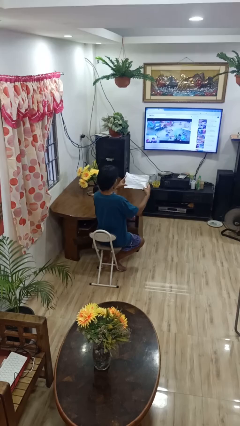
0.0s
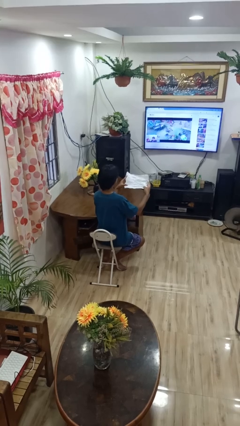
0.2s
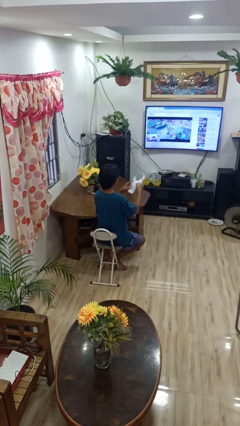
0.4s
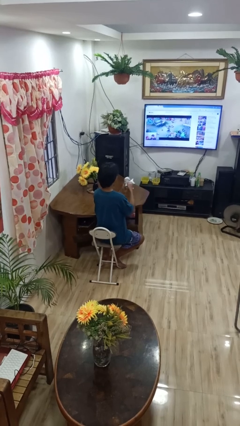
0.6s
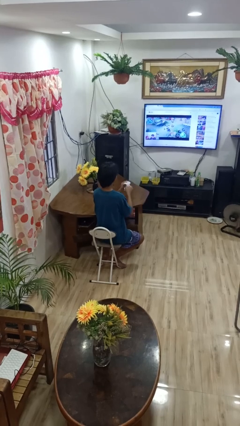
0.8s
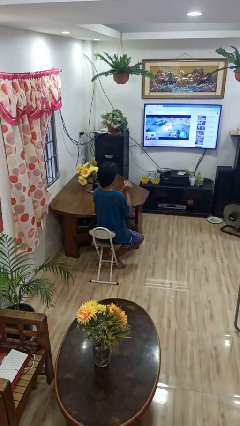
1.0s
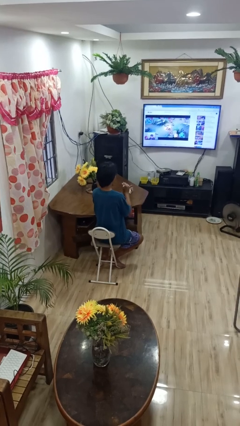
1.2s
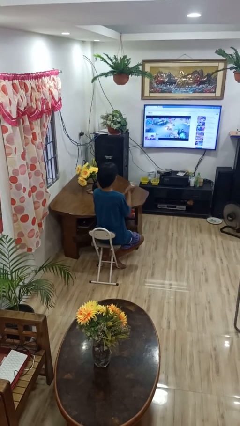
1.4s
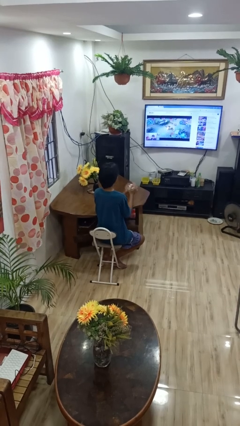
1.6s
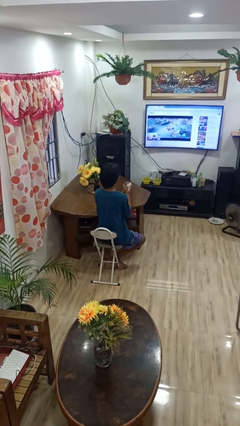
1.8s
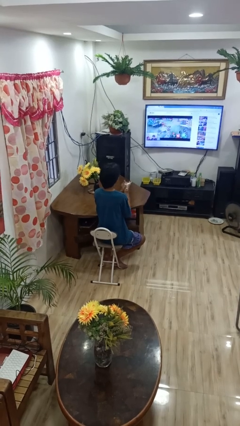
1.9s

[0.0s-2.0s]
person crumples paper

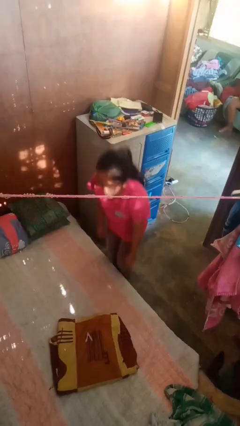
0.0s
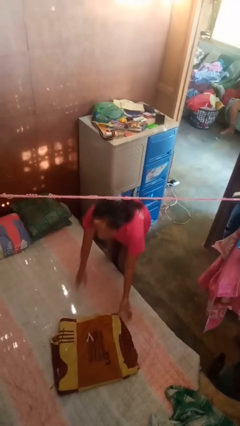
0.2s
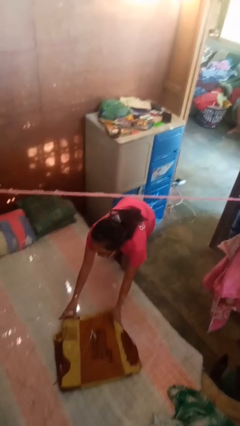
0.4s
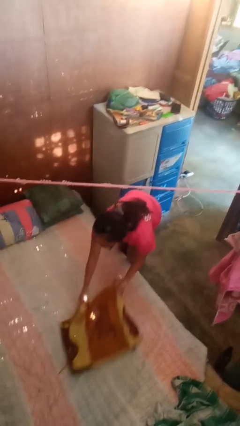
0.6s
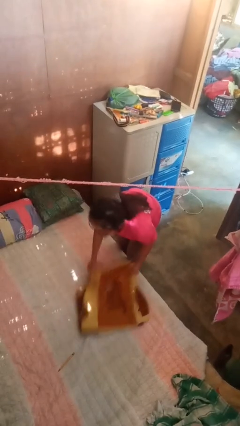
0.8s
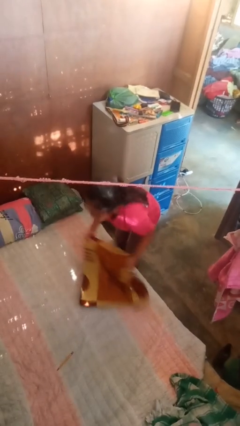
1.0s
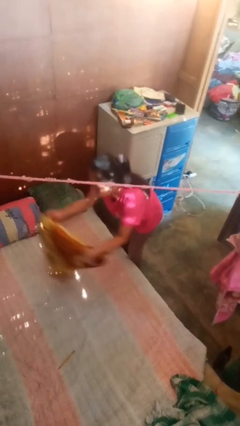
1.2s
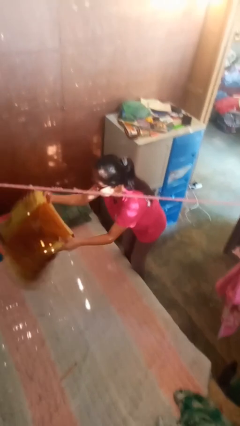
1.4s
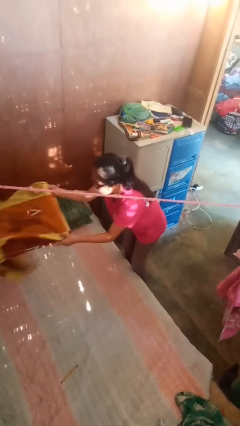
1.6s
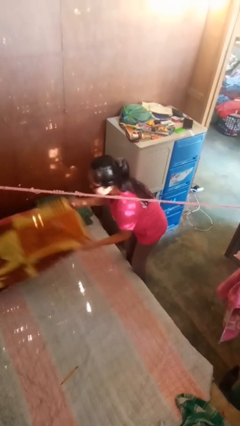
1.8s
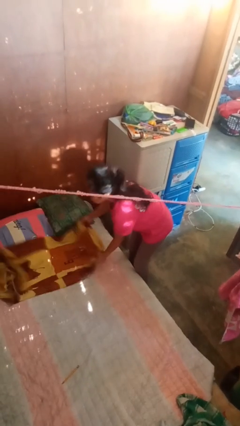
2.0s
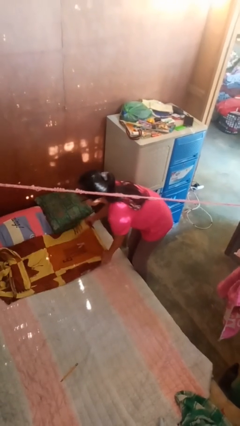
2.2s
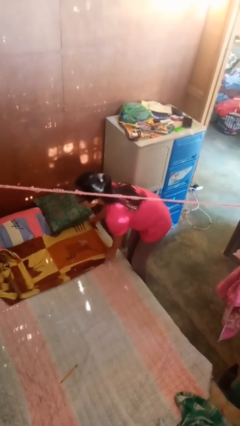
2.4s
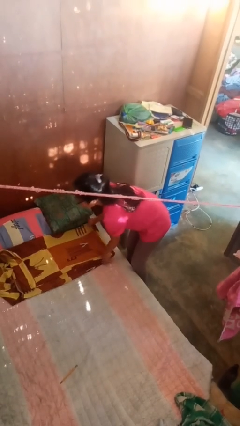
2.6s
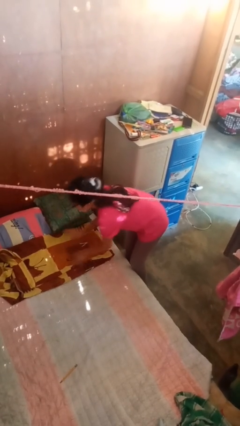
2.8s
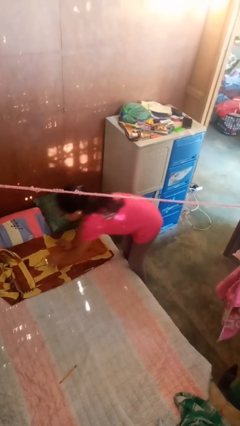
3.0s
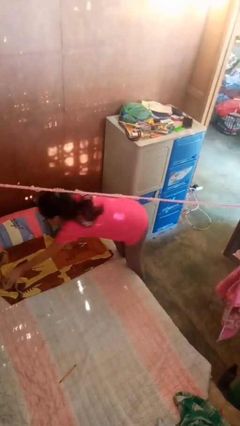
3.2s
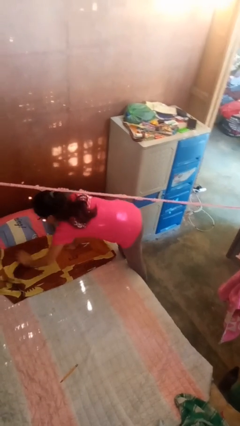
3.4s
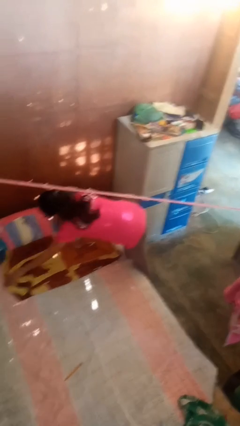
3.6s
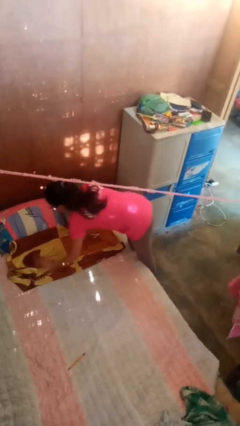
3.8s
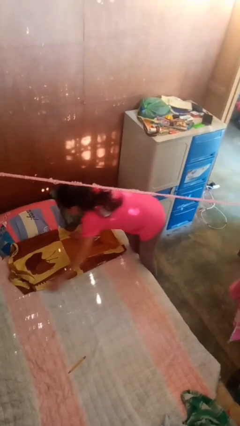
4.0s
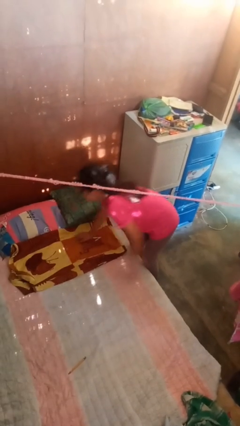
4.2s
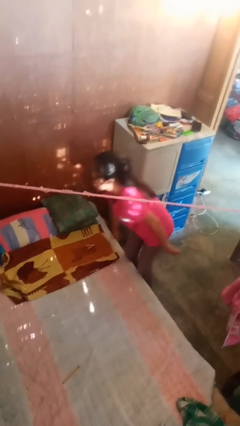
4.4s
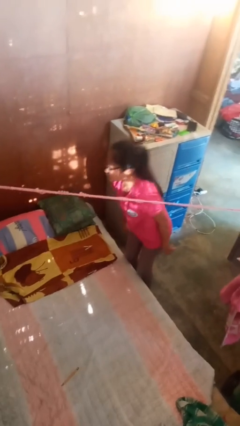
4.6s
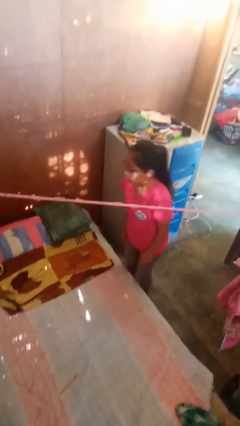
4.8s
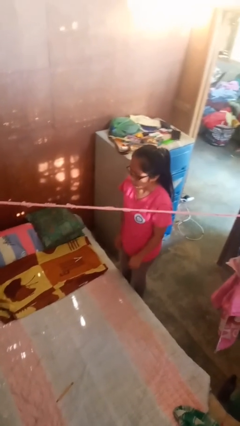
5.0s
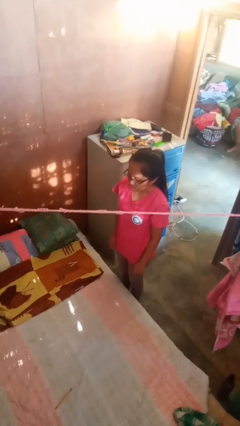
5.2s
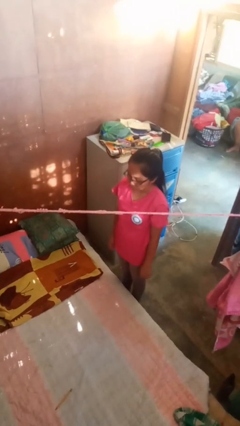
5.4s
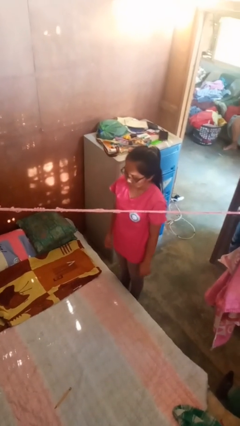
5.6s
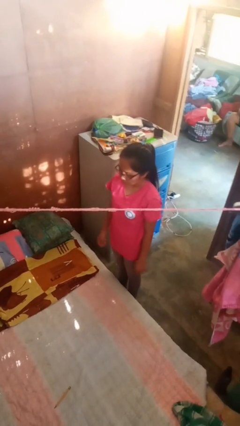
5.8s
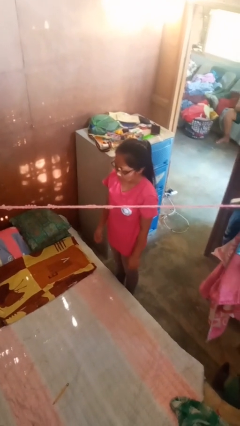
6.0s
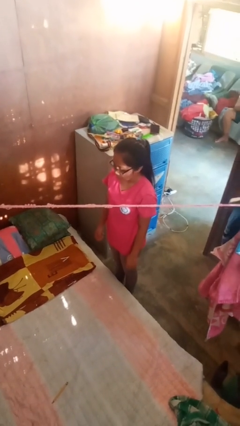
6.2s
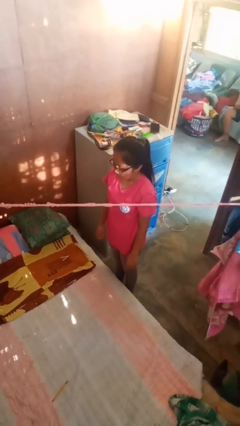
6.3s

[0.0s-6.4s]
person makes bed

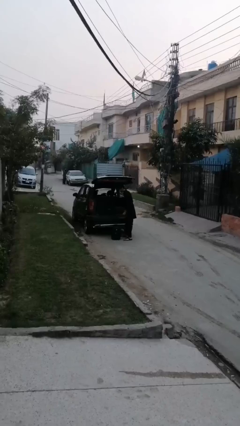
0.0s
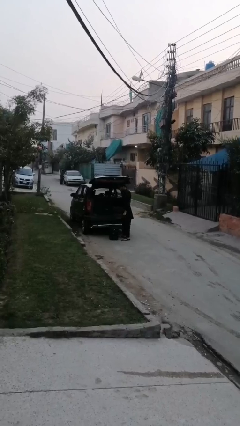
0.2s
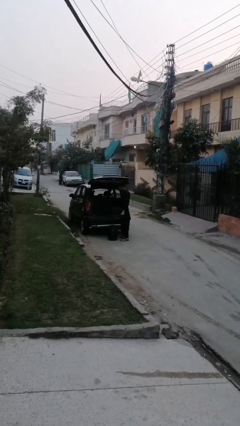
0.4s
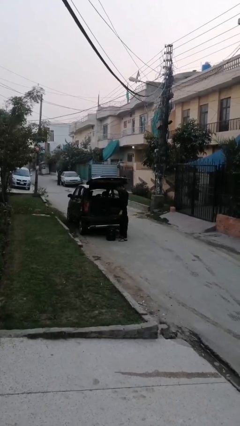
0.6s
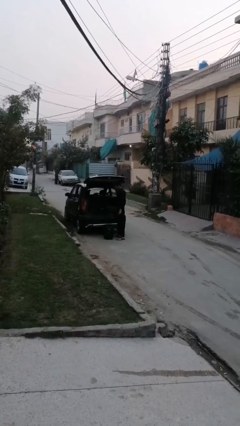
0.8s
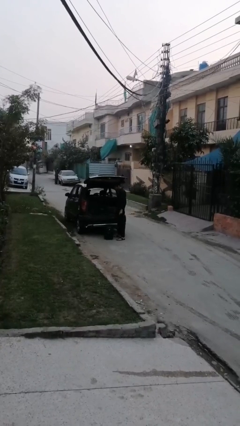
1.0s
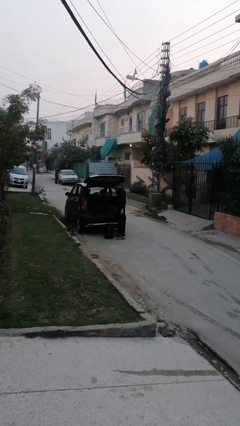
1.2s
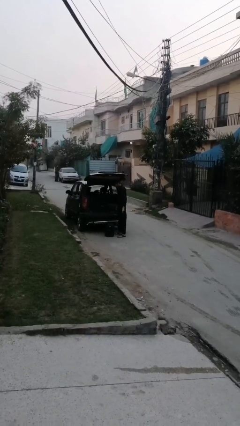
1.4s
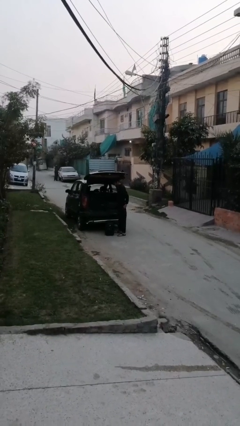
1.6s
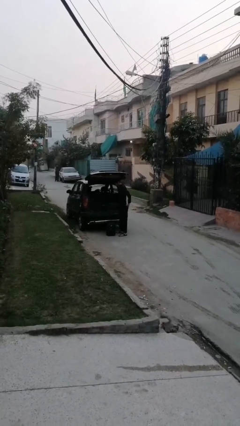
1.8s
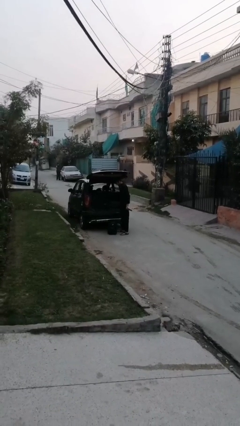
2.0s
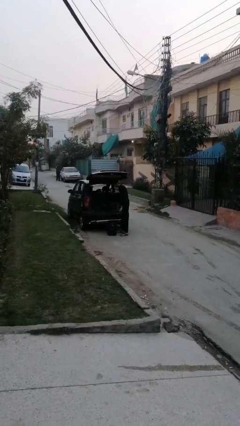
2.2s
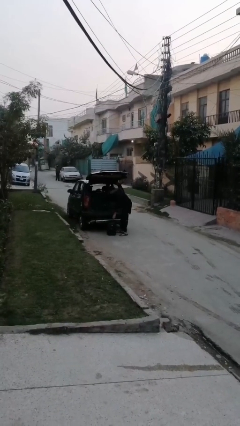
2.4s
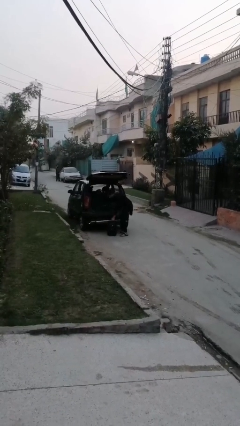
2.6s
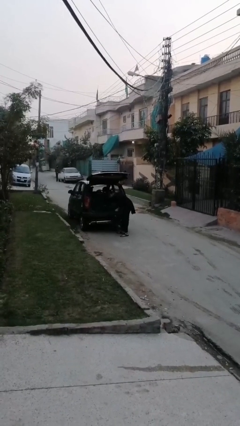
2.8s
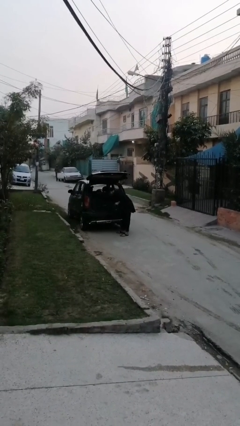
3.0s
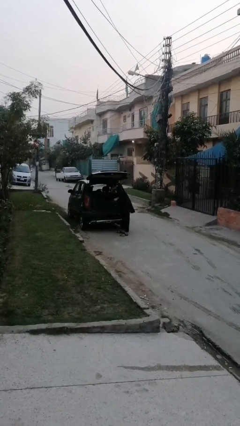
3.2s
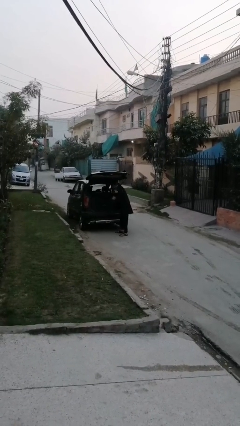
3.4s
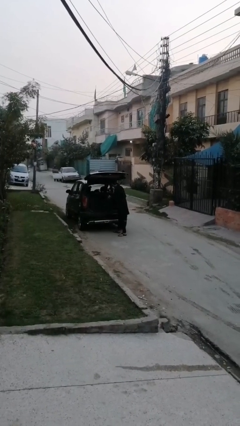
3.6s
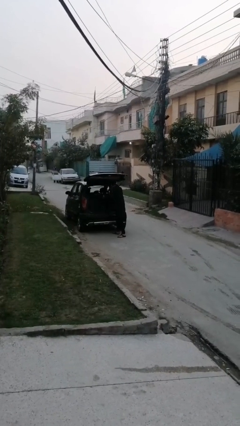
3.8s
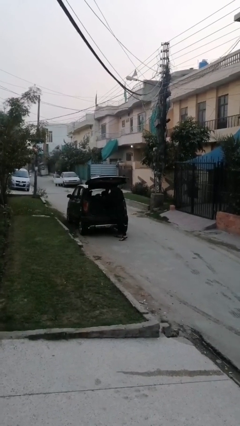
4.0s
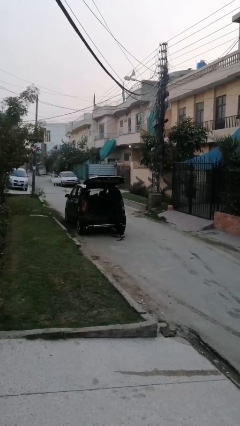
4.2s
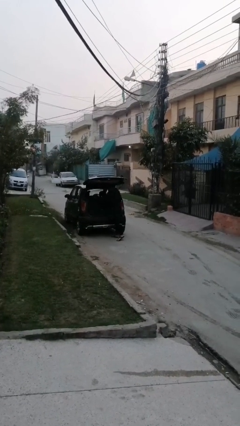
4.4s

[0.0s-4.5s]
person unloads car

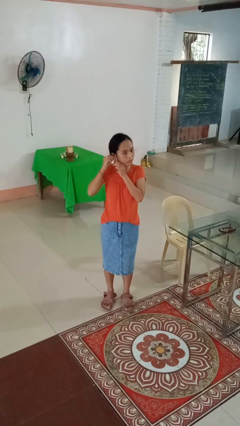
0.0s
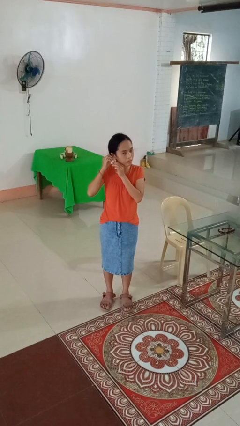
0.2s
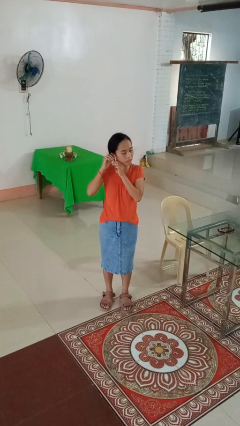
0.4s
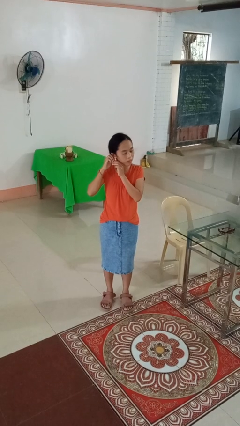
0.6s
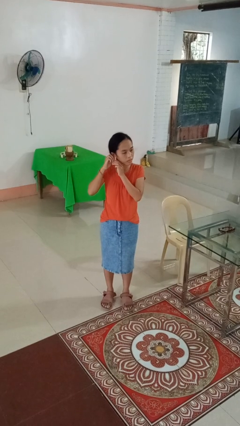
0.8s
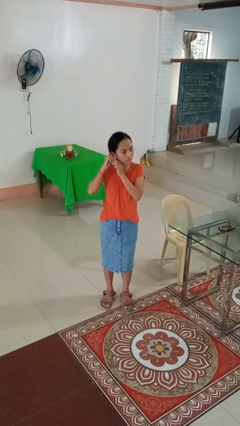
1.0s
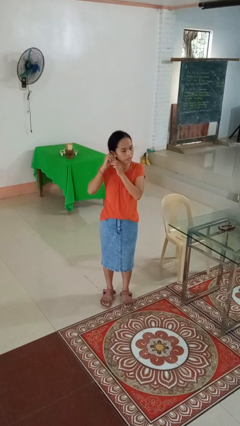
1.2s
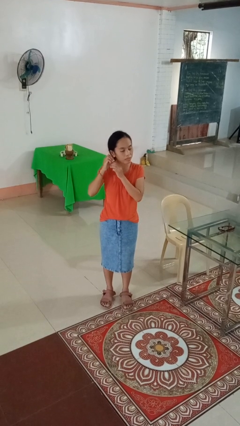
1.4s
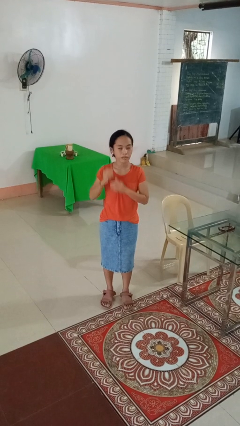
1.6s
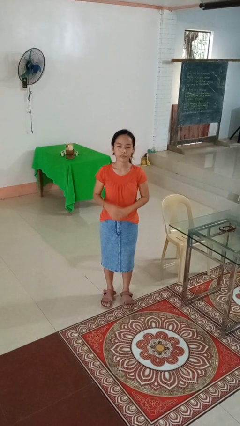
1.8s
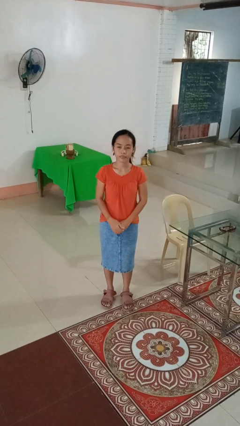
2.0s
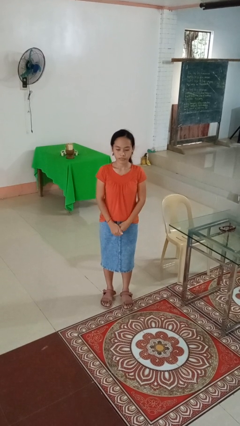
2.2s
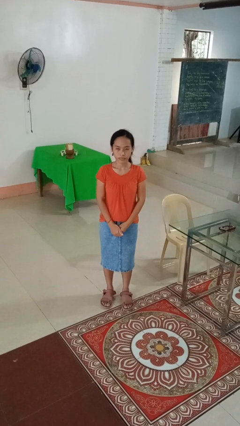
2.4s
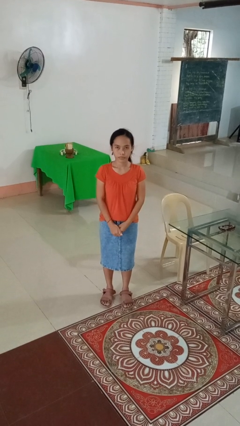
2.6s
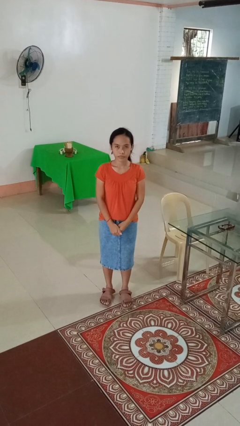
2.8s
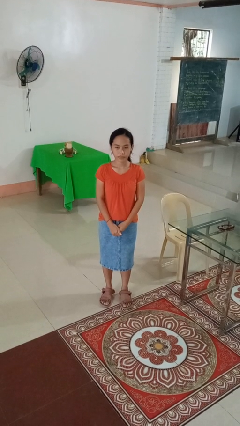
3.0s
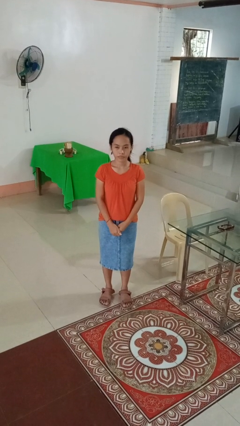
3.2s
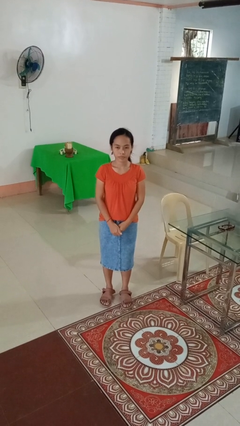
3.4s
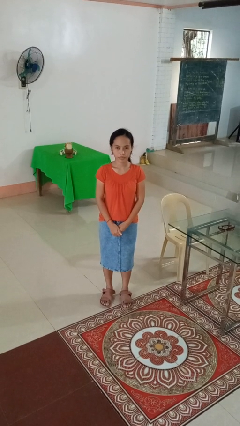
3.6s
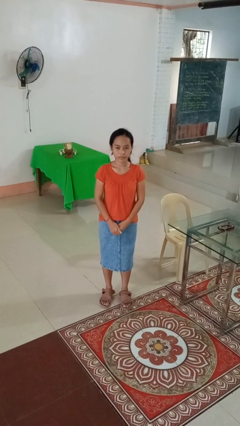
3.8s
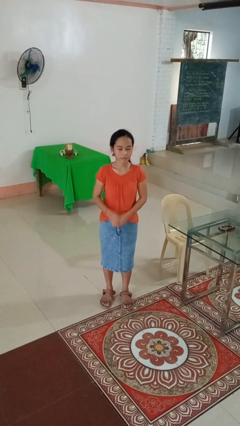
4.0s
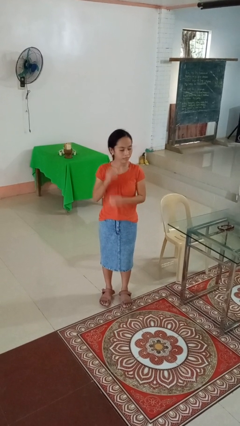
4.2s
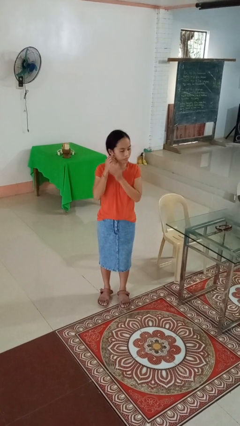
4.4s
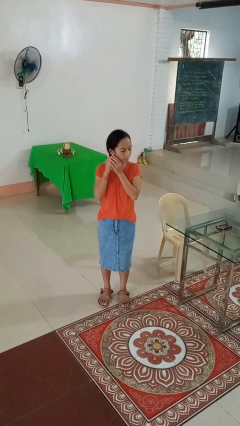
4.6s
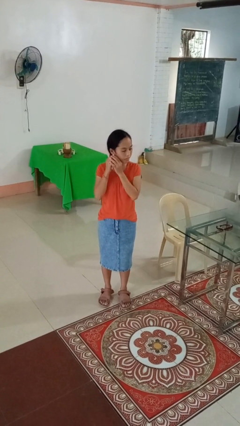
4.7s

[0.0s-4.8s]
person puts on earrings

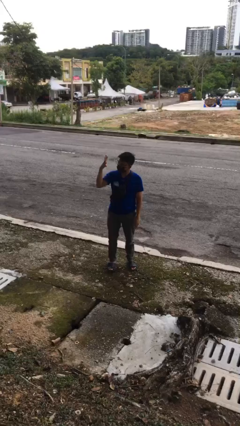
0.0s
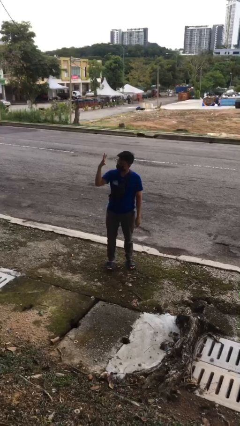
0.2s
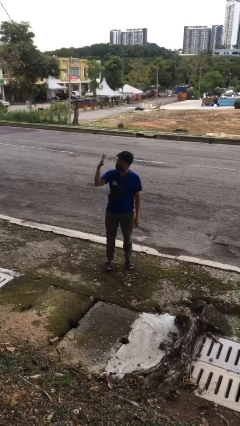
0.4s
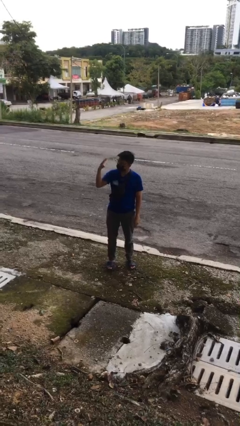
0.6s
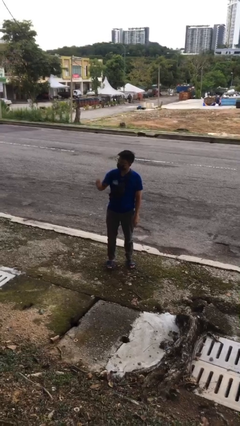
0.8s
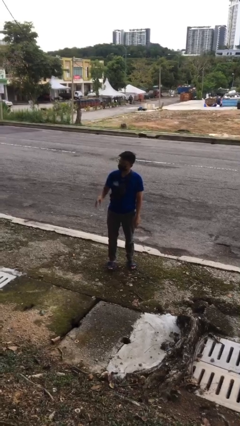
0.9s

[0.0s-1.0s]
person gestures number four
